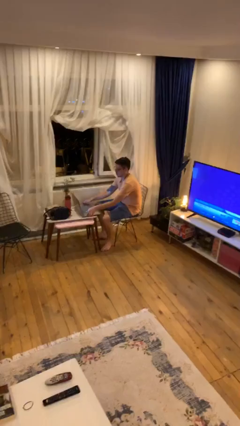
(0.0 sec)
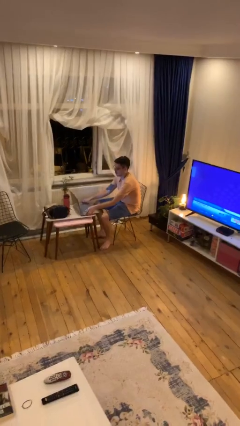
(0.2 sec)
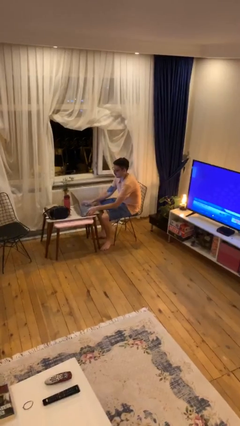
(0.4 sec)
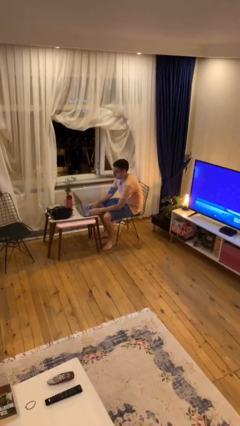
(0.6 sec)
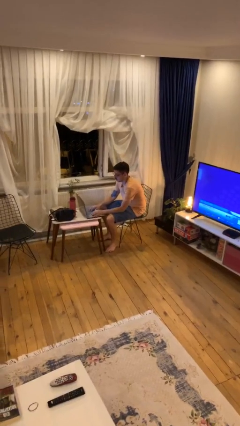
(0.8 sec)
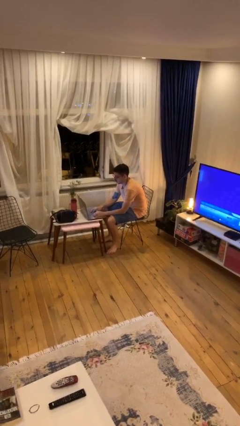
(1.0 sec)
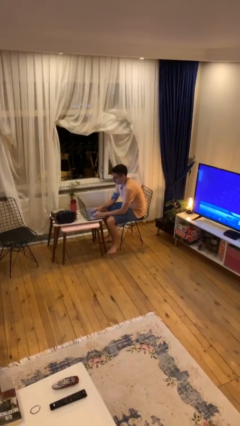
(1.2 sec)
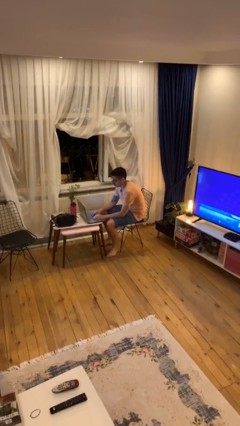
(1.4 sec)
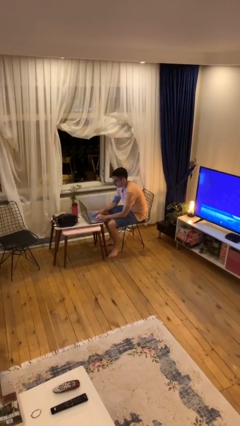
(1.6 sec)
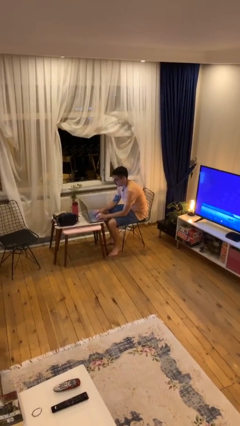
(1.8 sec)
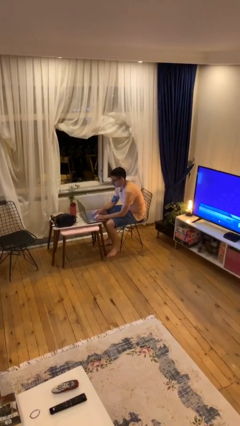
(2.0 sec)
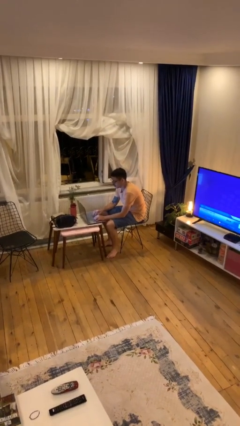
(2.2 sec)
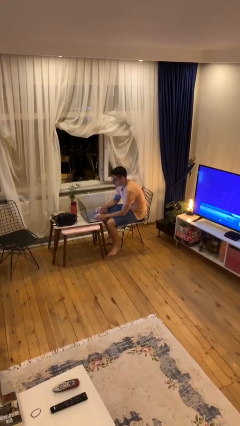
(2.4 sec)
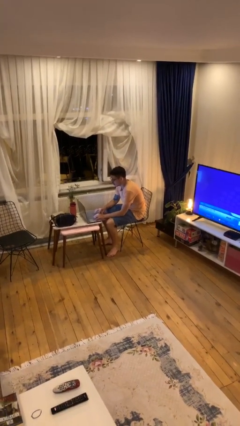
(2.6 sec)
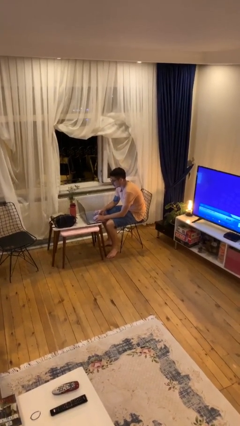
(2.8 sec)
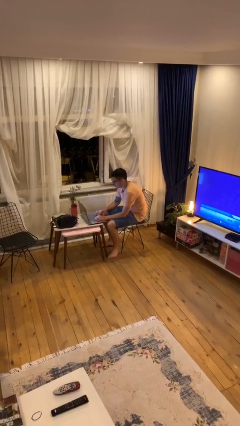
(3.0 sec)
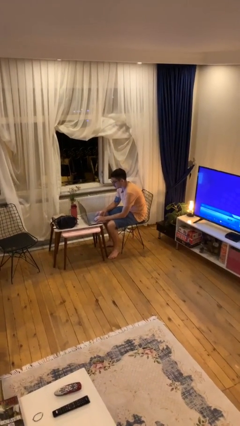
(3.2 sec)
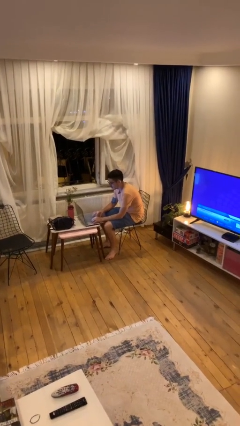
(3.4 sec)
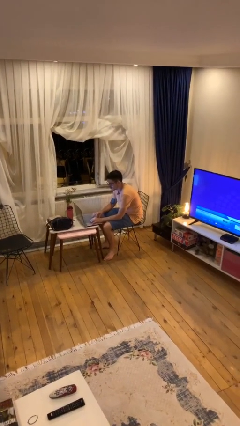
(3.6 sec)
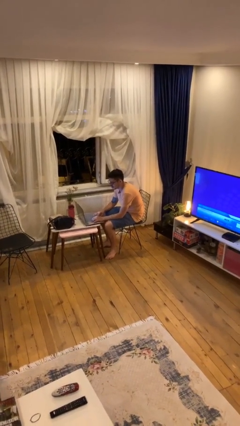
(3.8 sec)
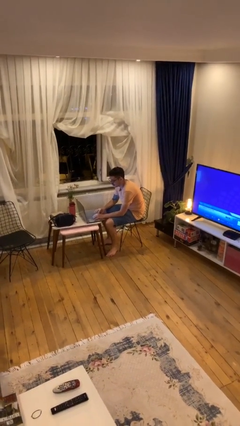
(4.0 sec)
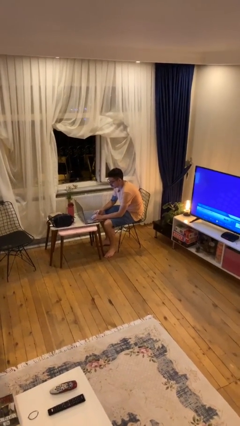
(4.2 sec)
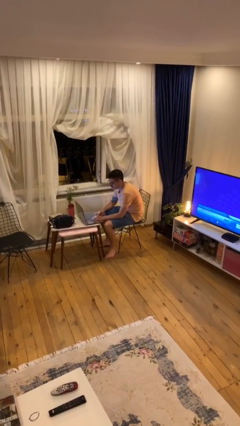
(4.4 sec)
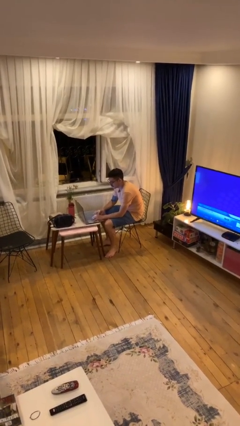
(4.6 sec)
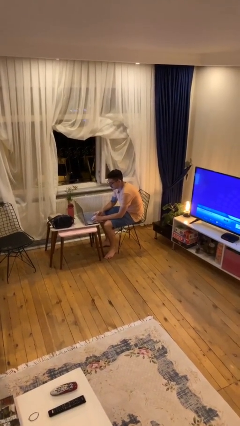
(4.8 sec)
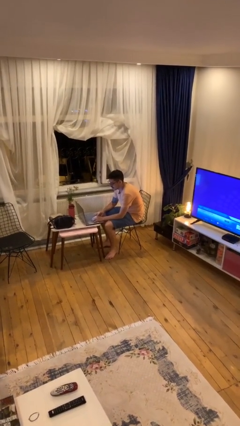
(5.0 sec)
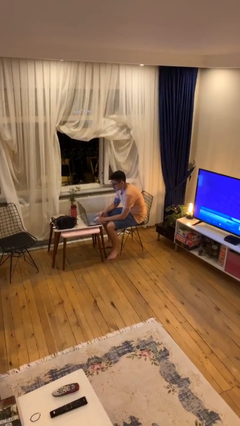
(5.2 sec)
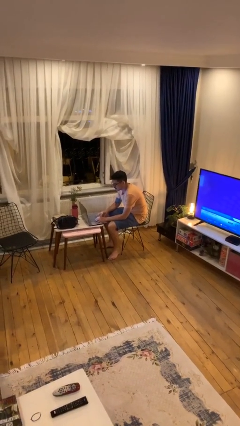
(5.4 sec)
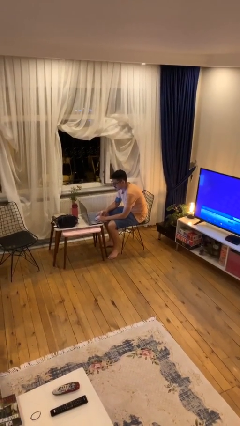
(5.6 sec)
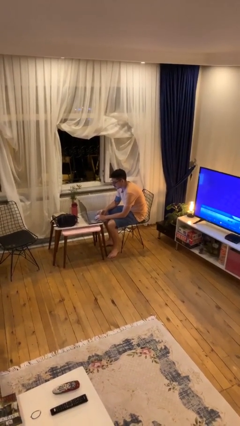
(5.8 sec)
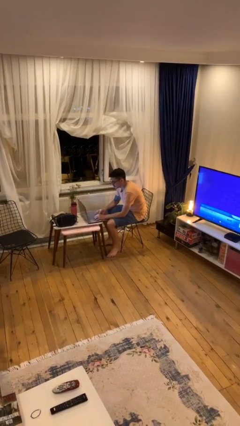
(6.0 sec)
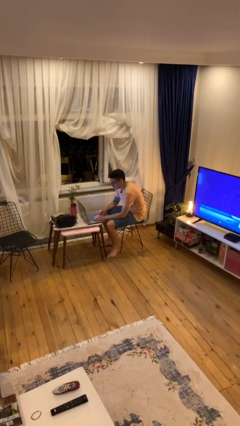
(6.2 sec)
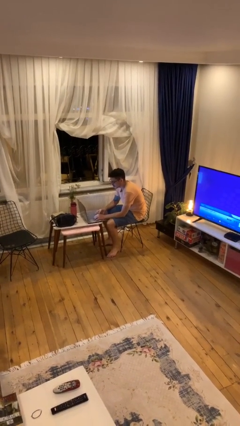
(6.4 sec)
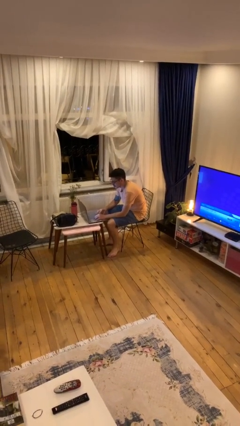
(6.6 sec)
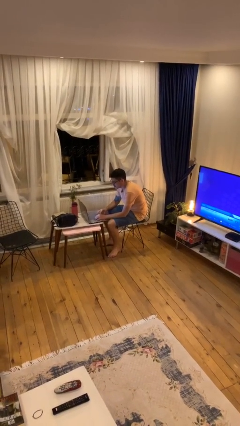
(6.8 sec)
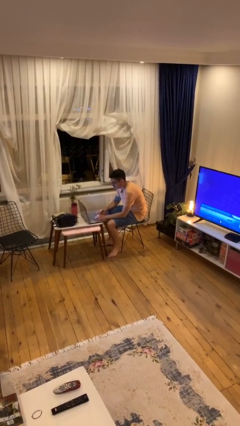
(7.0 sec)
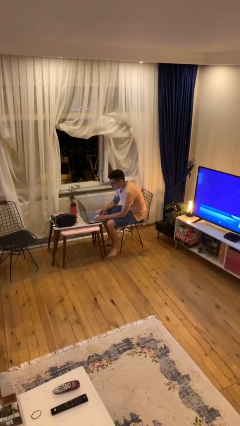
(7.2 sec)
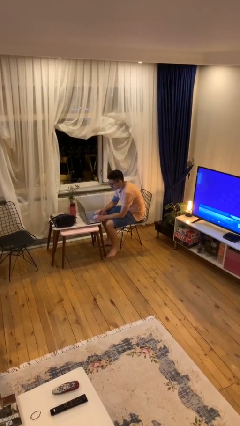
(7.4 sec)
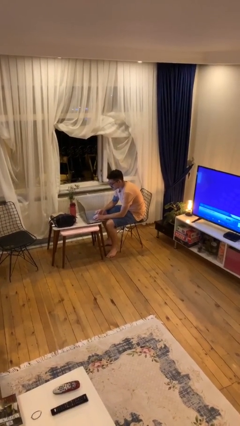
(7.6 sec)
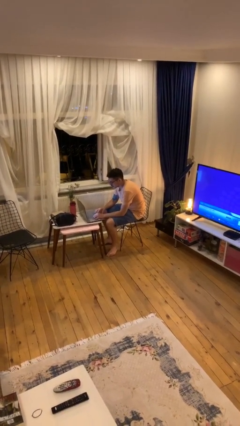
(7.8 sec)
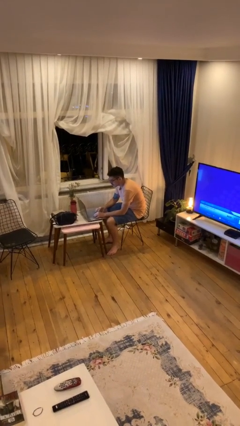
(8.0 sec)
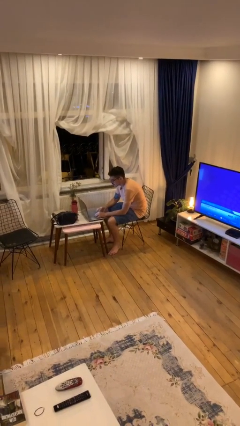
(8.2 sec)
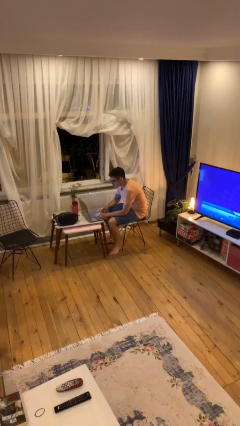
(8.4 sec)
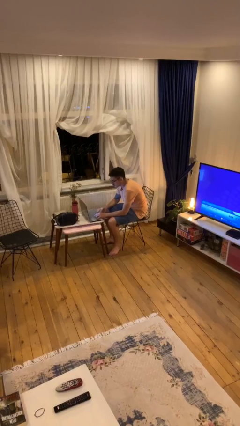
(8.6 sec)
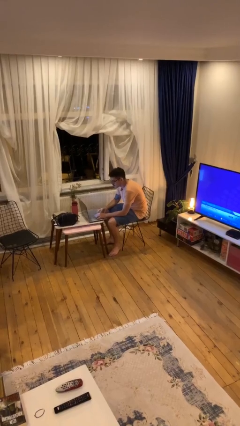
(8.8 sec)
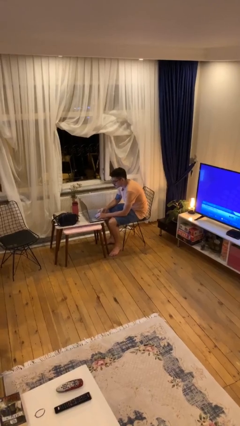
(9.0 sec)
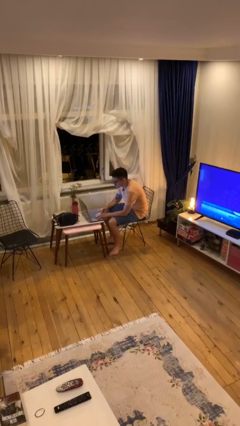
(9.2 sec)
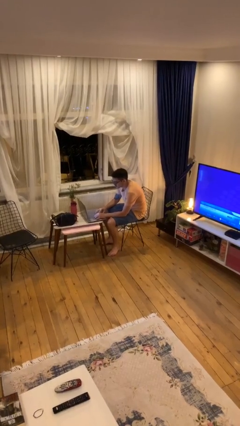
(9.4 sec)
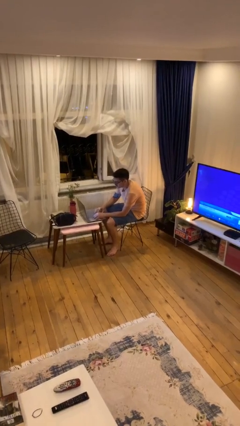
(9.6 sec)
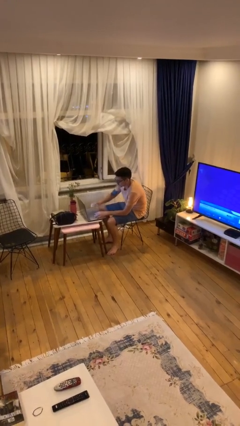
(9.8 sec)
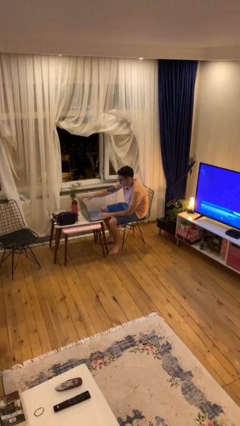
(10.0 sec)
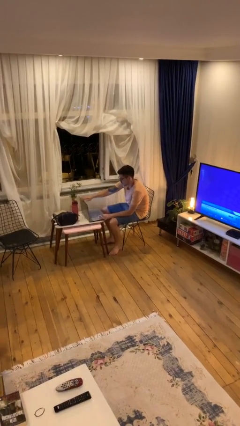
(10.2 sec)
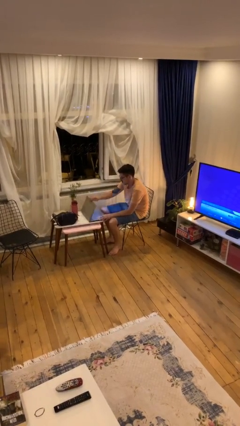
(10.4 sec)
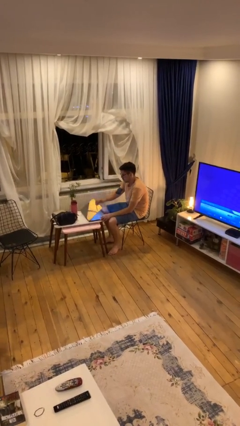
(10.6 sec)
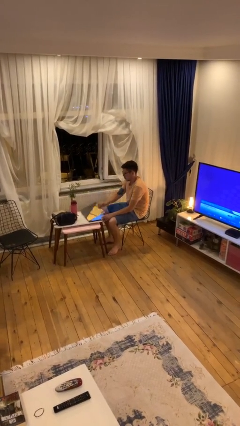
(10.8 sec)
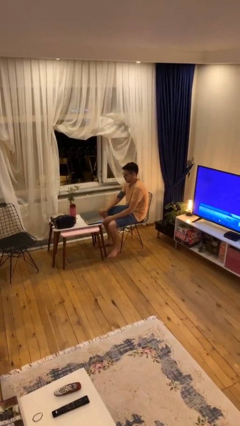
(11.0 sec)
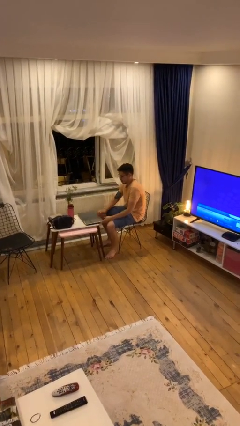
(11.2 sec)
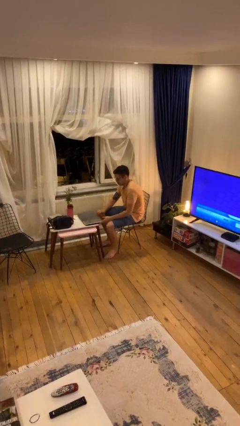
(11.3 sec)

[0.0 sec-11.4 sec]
person interacts with laptop

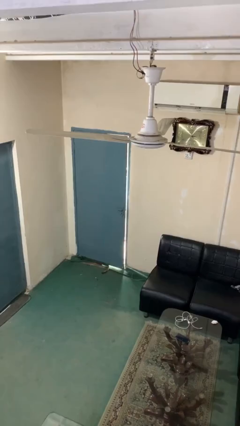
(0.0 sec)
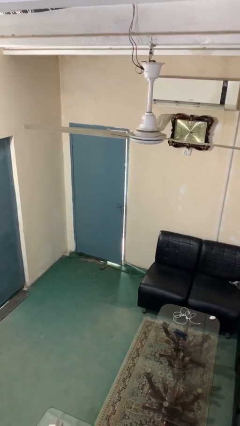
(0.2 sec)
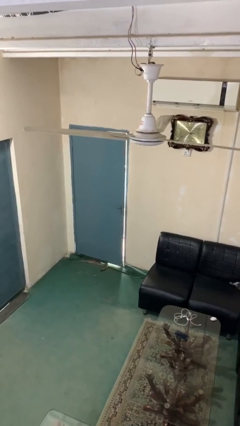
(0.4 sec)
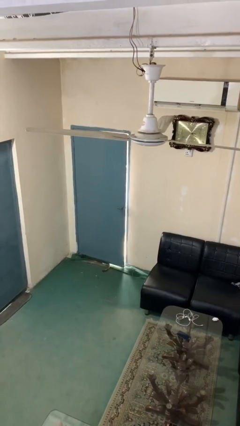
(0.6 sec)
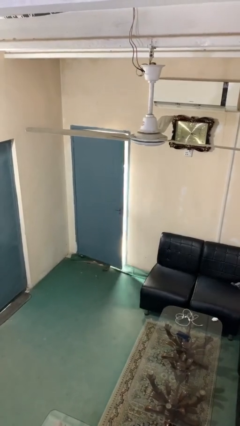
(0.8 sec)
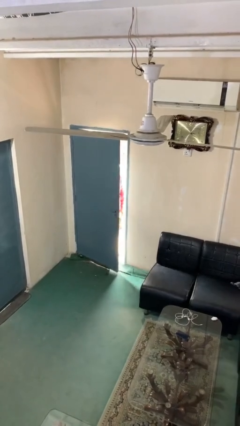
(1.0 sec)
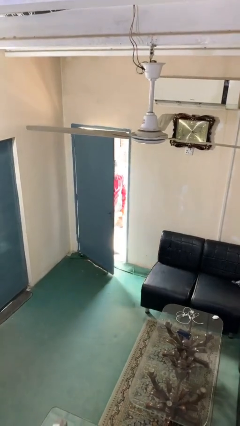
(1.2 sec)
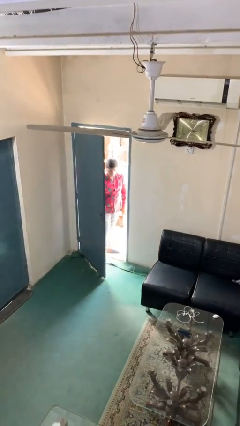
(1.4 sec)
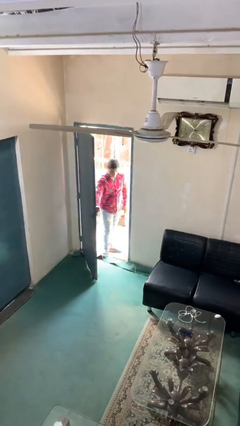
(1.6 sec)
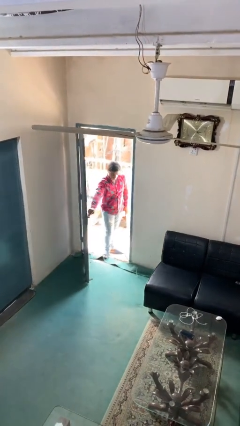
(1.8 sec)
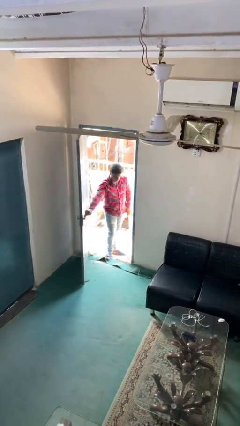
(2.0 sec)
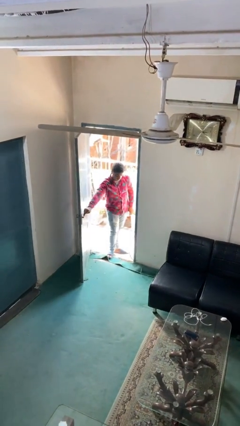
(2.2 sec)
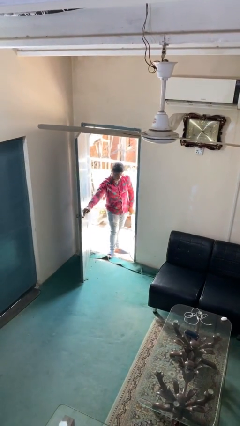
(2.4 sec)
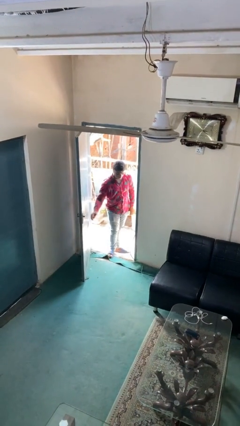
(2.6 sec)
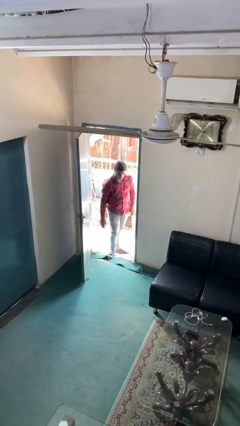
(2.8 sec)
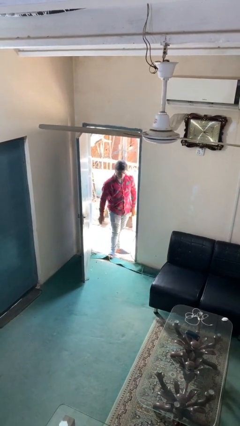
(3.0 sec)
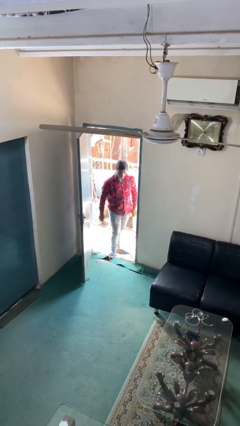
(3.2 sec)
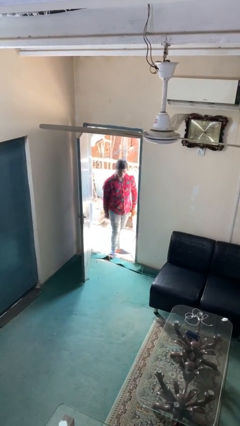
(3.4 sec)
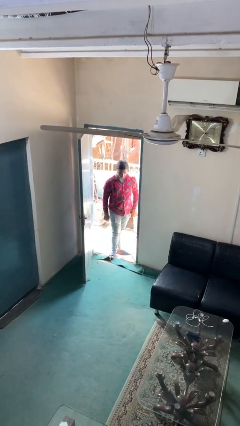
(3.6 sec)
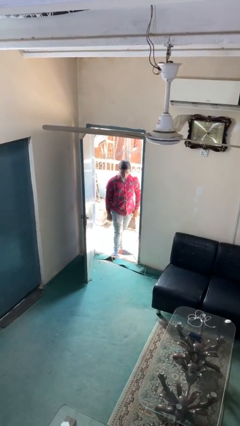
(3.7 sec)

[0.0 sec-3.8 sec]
person opens facility door

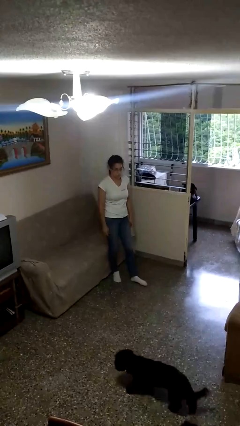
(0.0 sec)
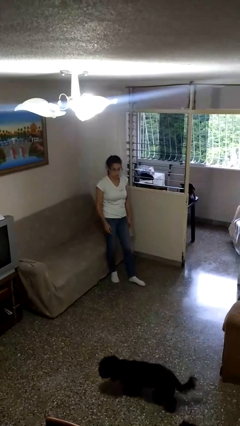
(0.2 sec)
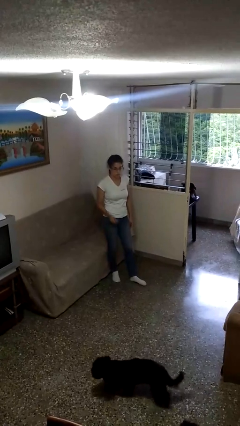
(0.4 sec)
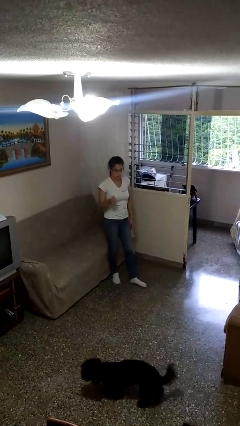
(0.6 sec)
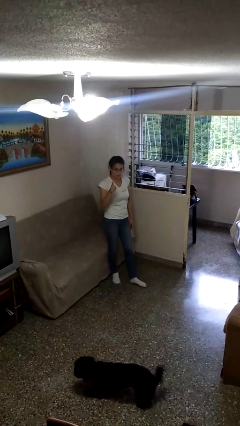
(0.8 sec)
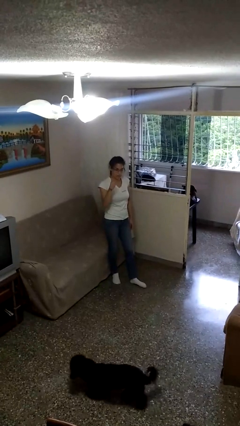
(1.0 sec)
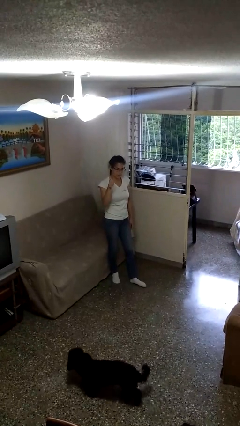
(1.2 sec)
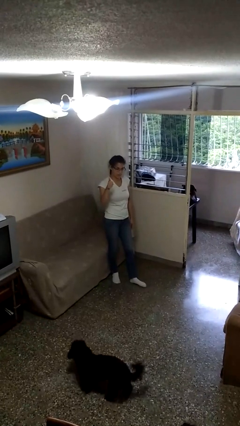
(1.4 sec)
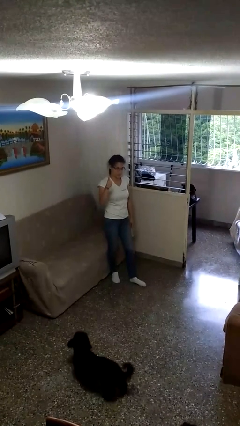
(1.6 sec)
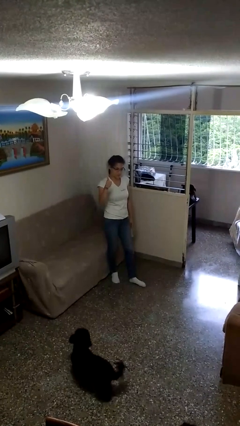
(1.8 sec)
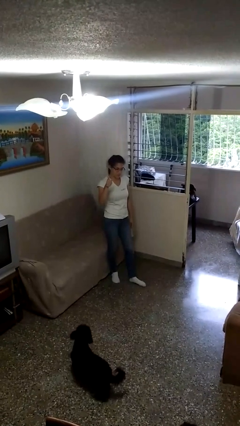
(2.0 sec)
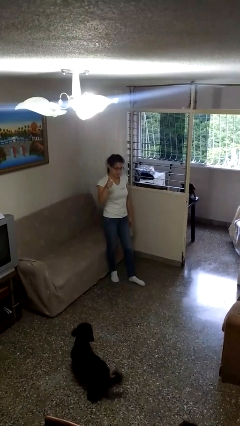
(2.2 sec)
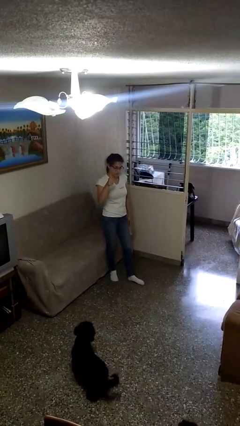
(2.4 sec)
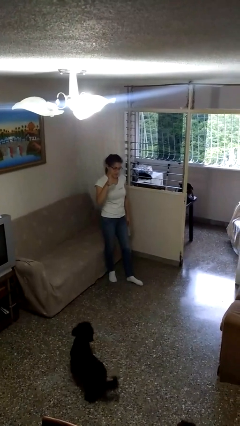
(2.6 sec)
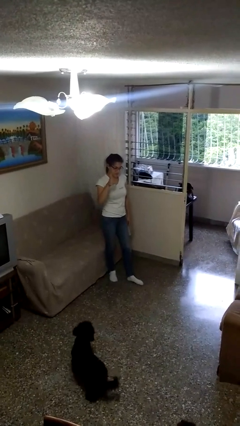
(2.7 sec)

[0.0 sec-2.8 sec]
person gestures thumbs up
